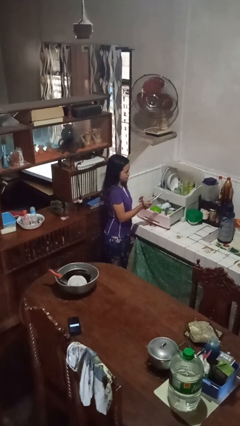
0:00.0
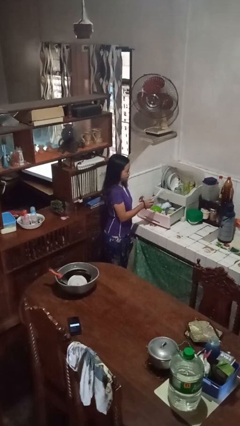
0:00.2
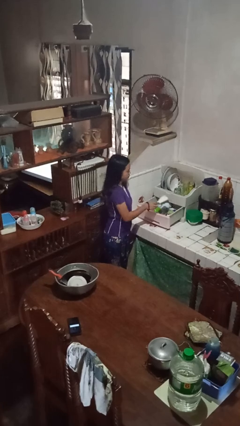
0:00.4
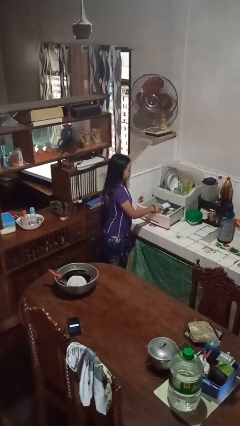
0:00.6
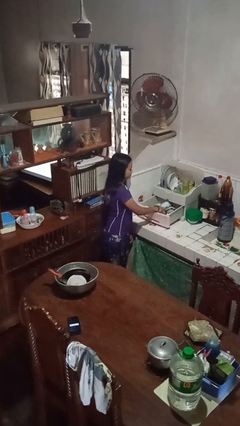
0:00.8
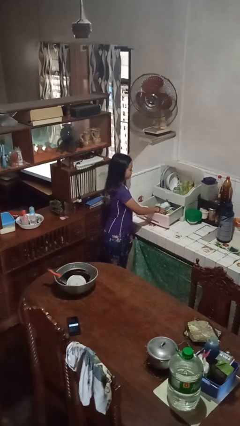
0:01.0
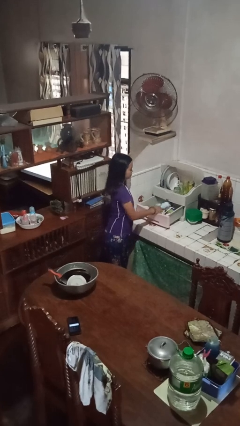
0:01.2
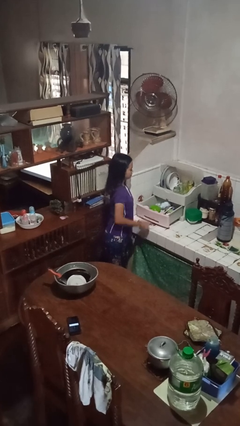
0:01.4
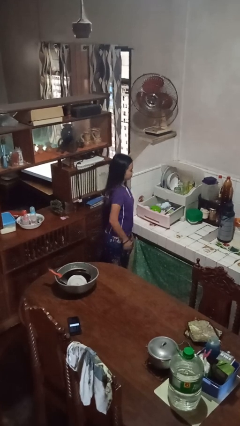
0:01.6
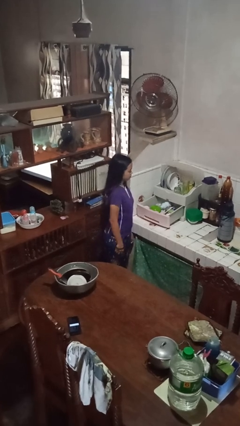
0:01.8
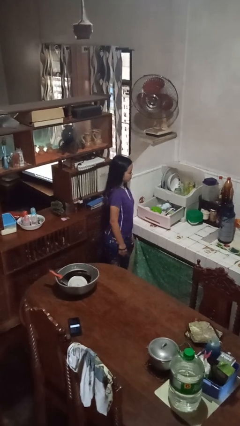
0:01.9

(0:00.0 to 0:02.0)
person puts object into kitchen drawer

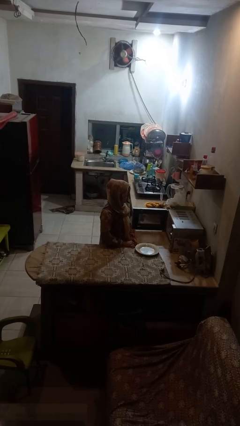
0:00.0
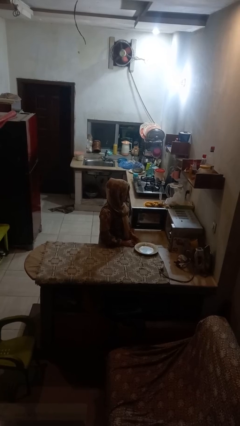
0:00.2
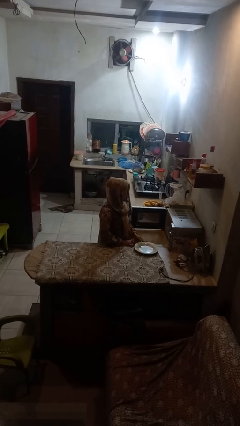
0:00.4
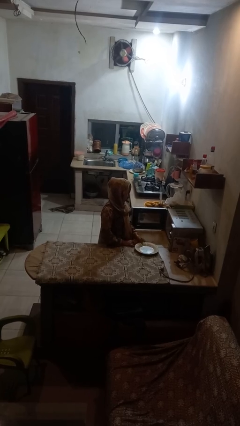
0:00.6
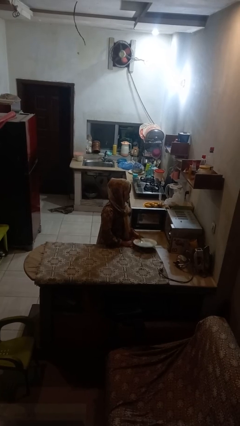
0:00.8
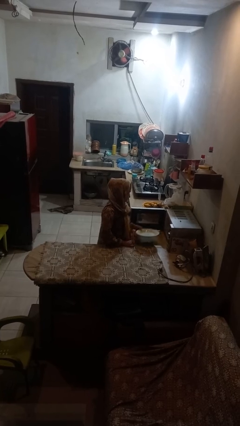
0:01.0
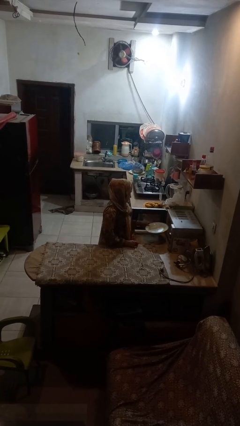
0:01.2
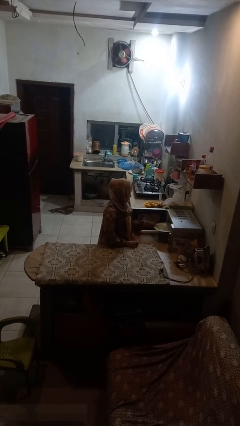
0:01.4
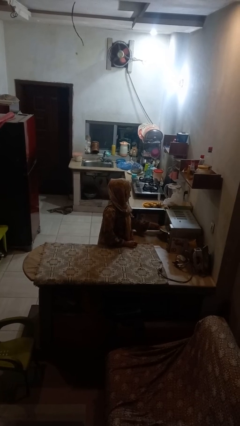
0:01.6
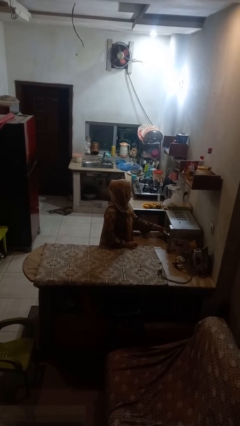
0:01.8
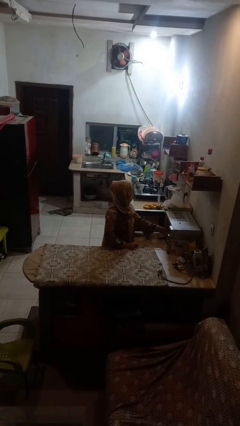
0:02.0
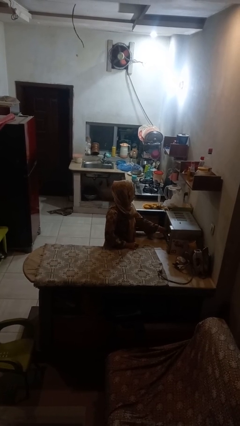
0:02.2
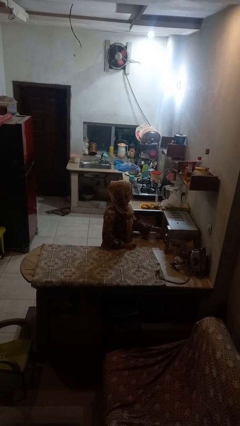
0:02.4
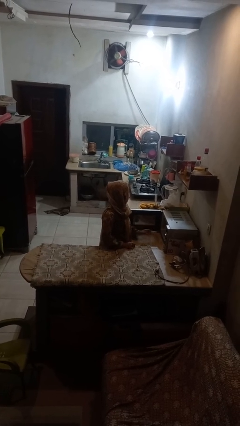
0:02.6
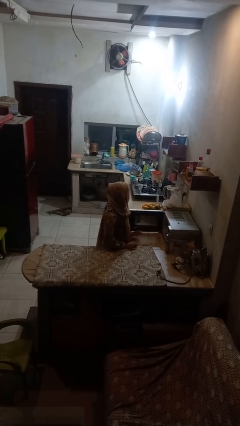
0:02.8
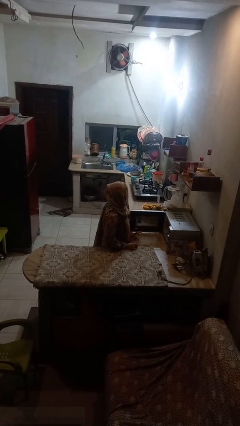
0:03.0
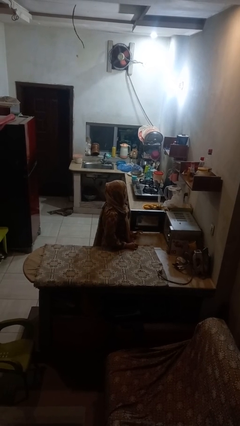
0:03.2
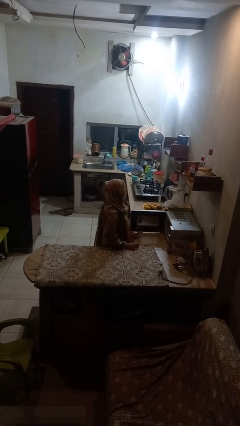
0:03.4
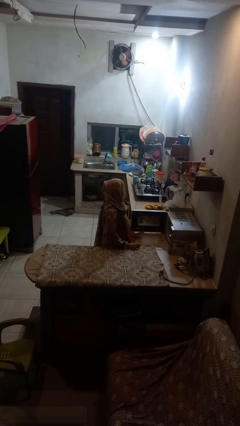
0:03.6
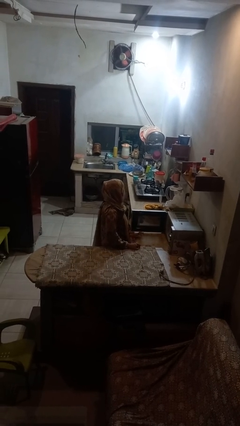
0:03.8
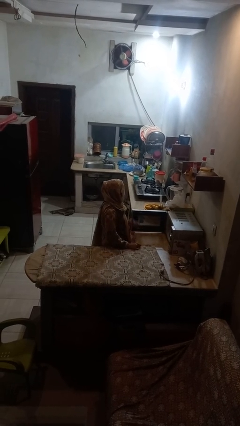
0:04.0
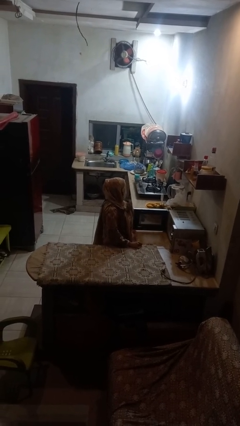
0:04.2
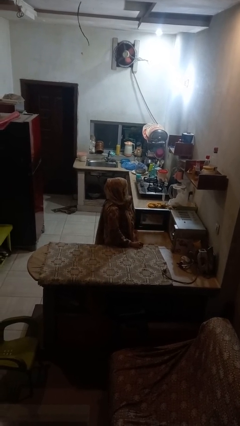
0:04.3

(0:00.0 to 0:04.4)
person puts object into microwave

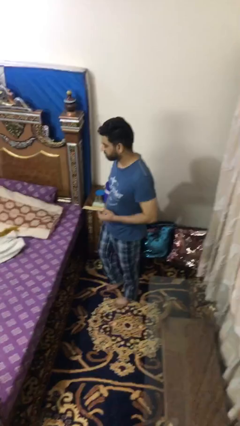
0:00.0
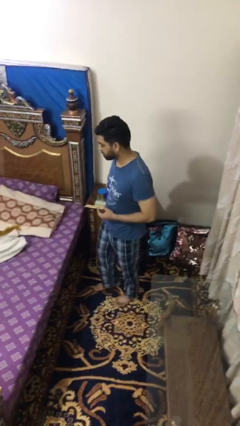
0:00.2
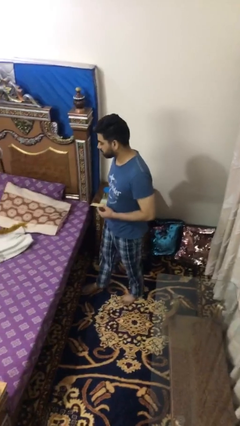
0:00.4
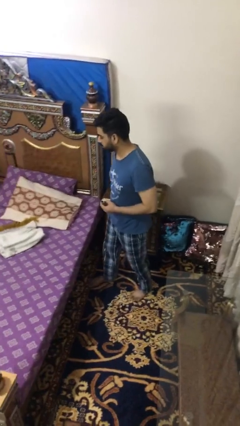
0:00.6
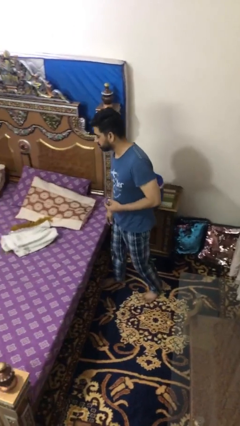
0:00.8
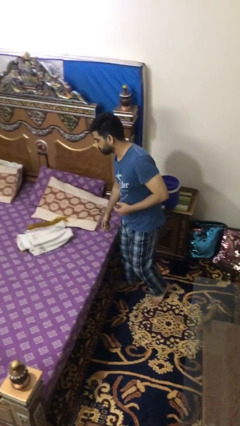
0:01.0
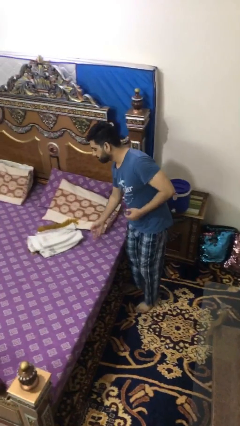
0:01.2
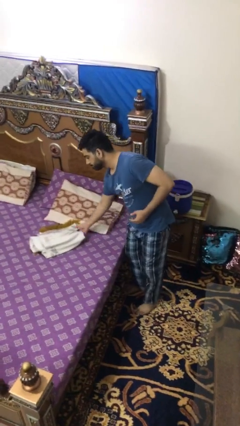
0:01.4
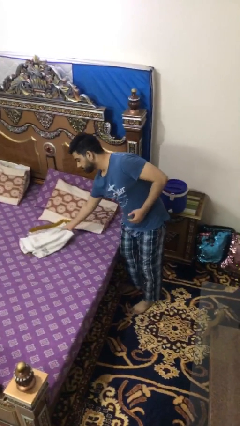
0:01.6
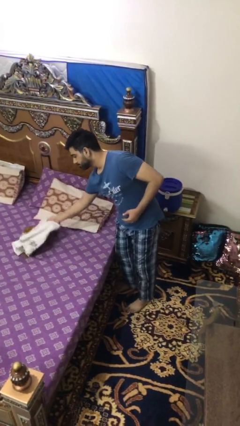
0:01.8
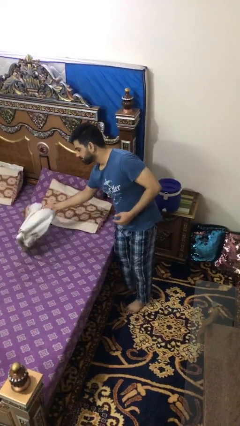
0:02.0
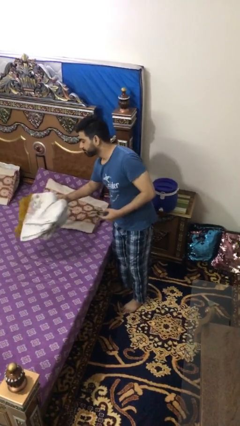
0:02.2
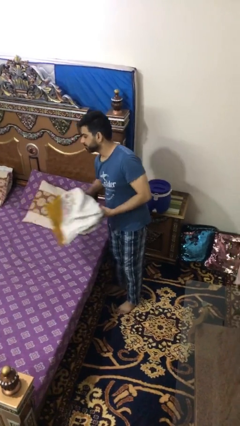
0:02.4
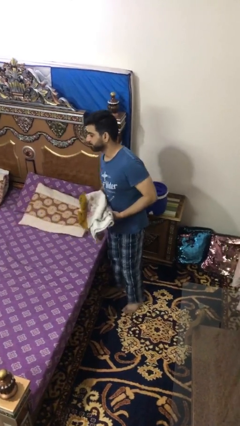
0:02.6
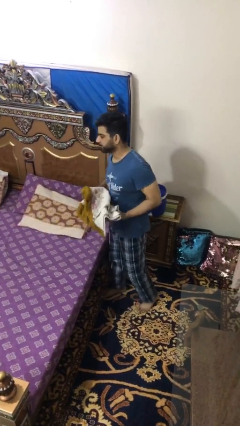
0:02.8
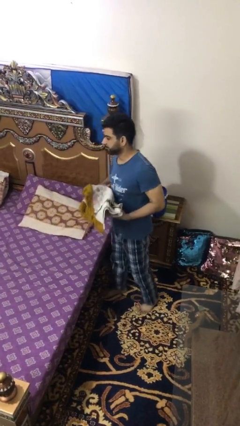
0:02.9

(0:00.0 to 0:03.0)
person picks up object from bed

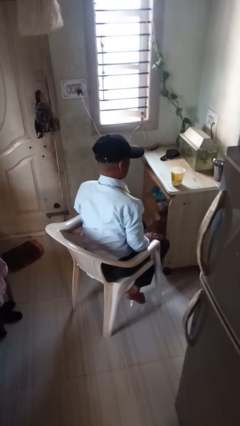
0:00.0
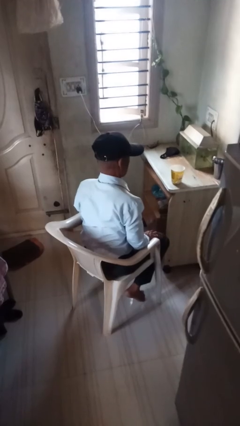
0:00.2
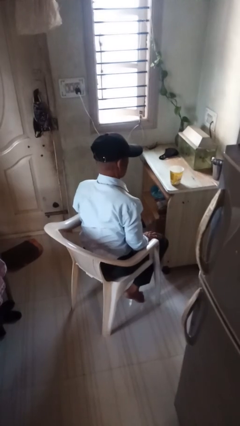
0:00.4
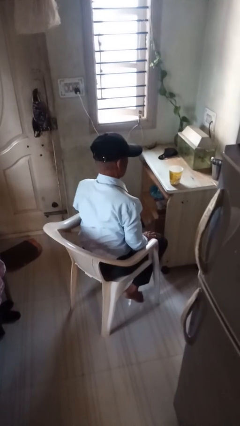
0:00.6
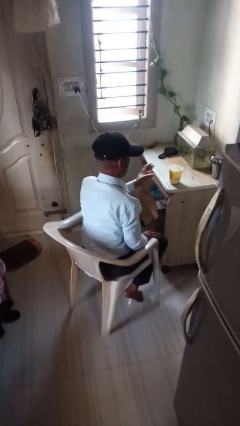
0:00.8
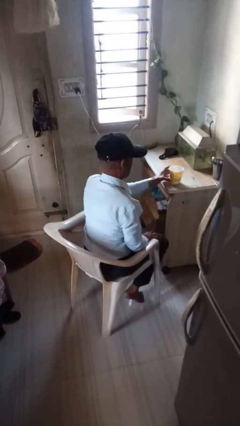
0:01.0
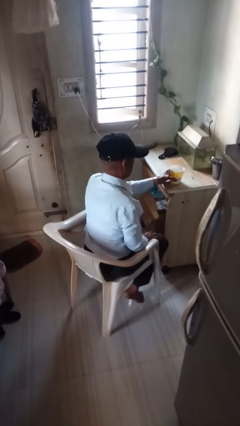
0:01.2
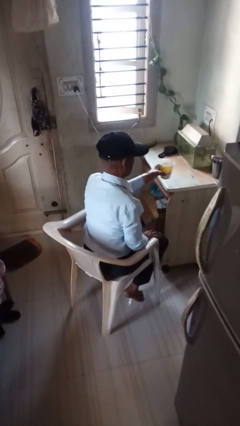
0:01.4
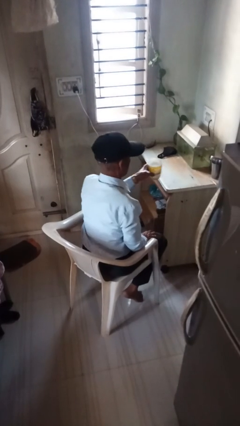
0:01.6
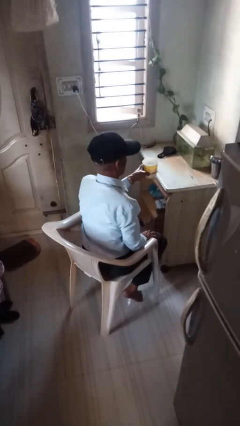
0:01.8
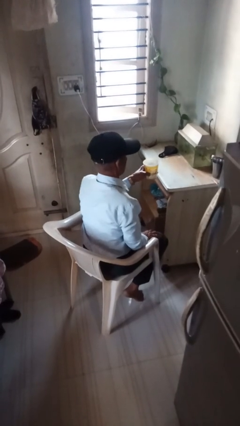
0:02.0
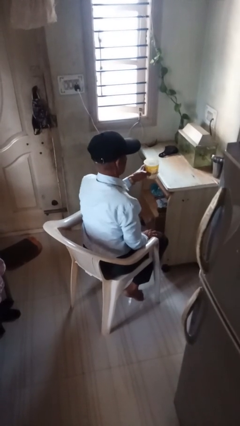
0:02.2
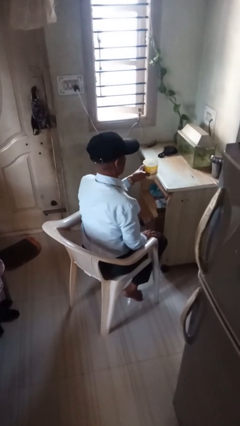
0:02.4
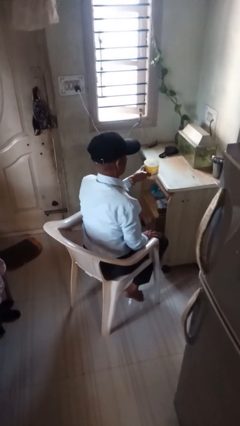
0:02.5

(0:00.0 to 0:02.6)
person picks up object from table

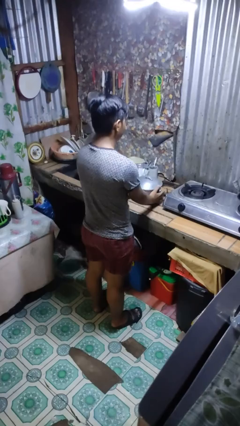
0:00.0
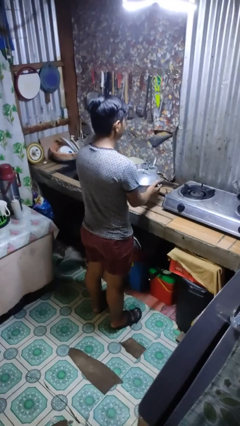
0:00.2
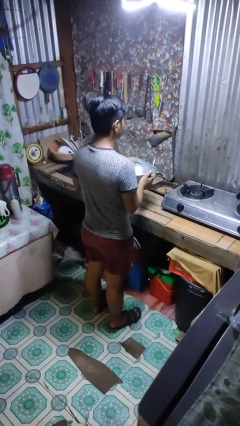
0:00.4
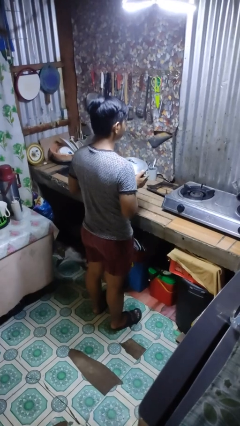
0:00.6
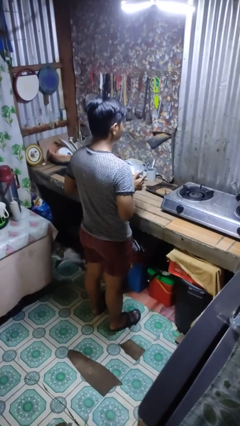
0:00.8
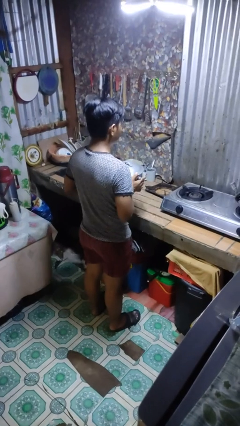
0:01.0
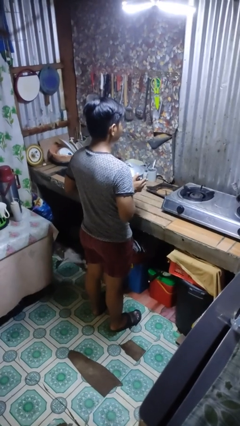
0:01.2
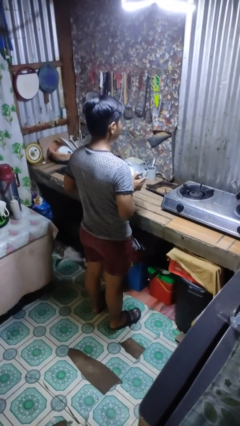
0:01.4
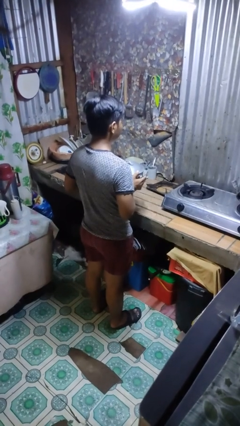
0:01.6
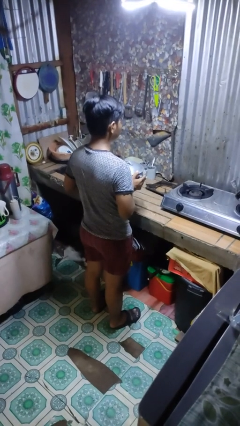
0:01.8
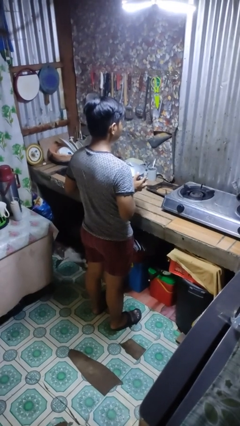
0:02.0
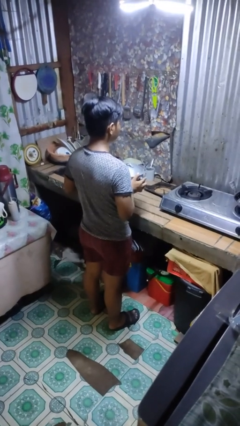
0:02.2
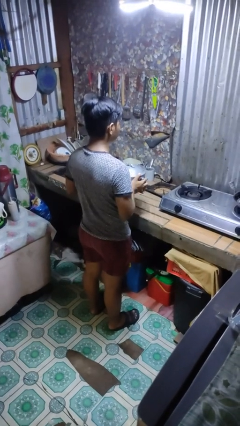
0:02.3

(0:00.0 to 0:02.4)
person picks up object from countertop

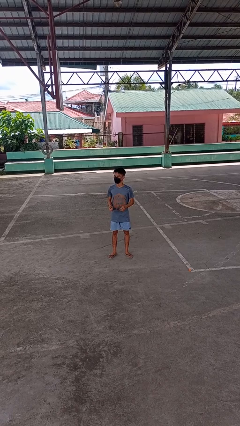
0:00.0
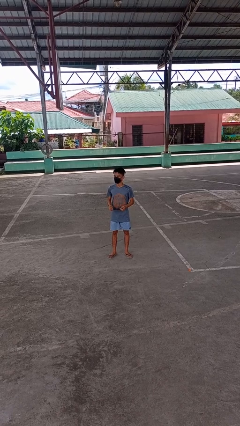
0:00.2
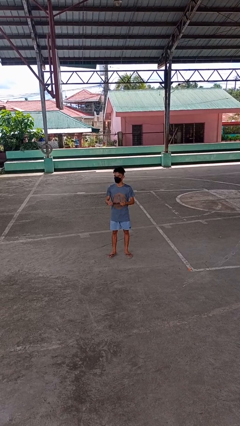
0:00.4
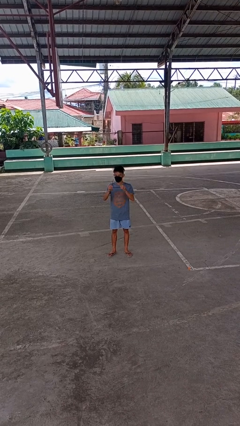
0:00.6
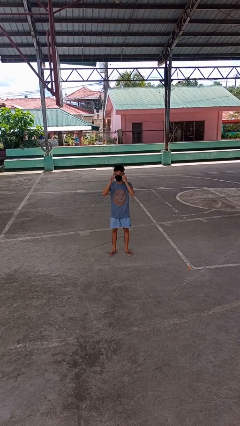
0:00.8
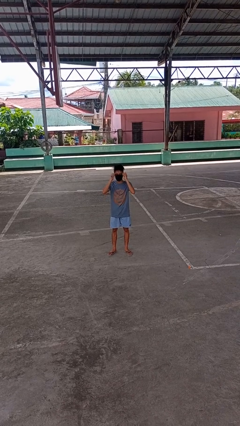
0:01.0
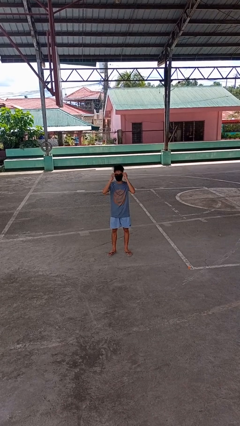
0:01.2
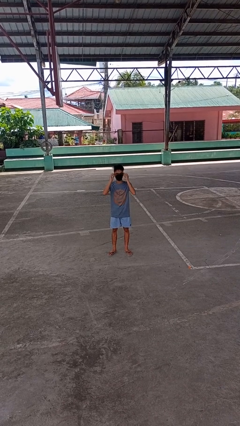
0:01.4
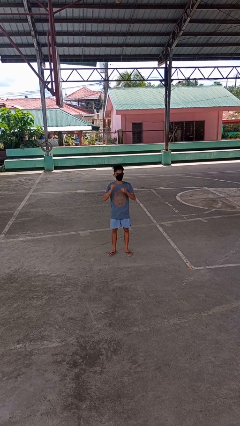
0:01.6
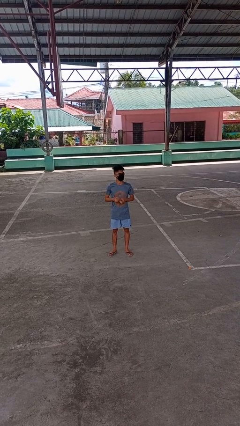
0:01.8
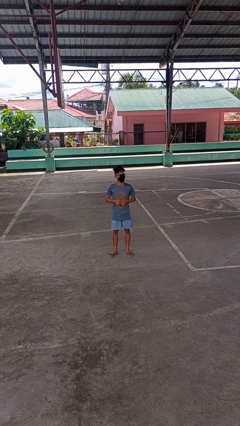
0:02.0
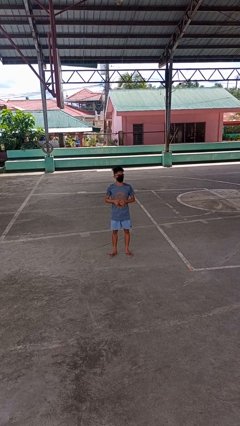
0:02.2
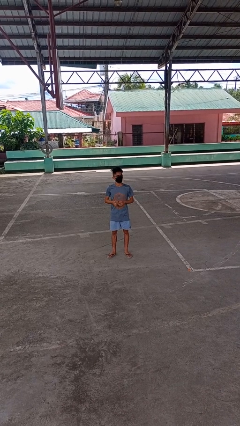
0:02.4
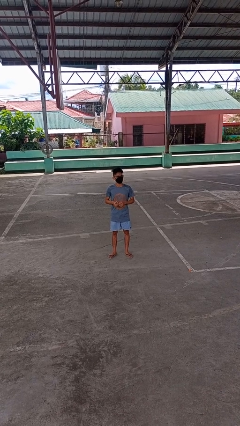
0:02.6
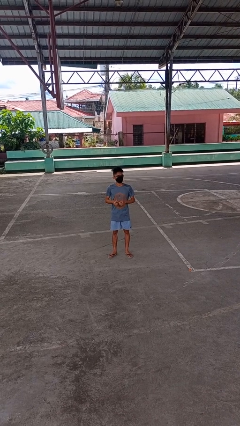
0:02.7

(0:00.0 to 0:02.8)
person puts on glasses
